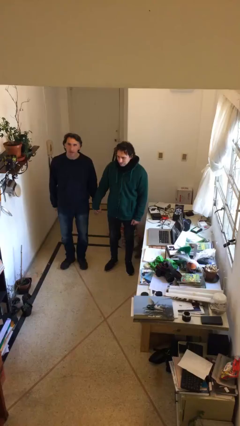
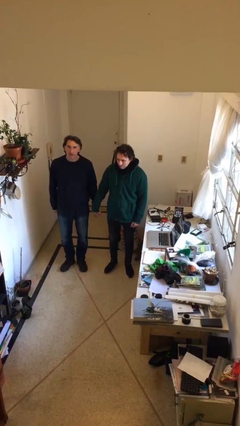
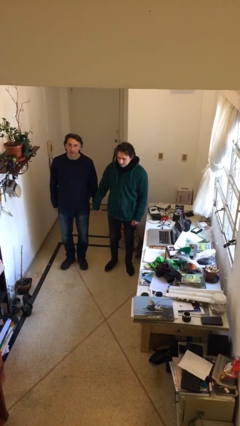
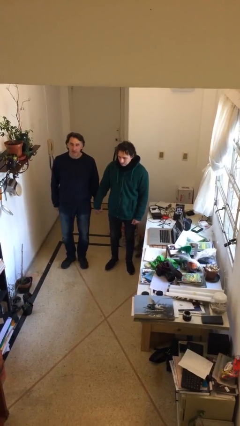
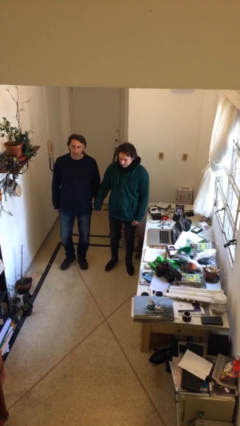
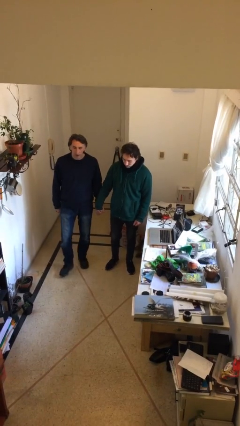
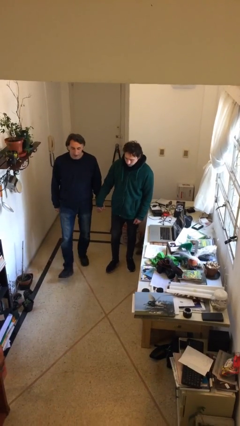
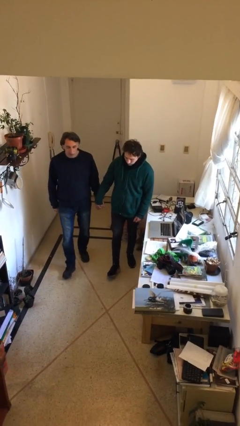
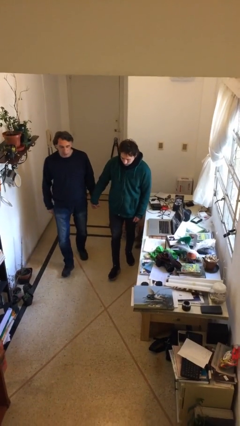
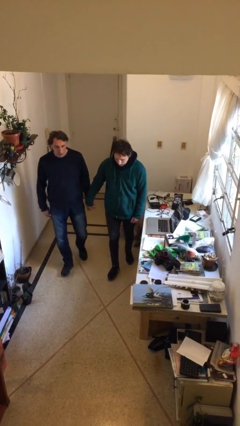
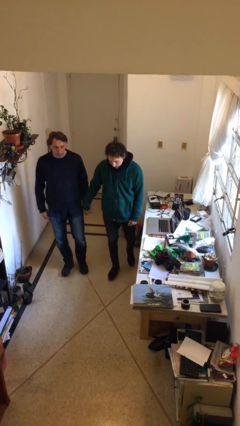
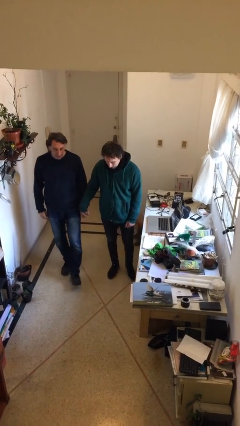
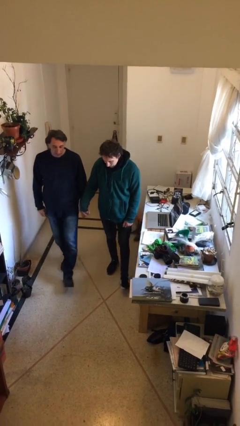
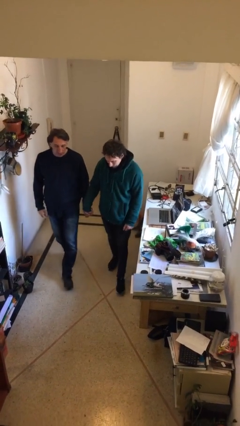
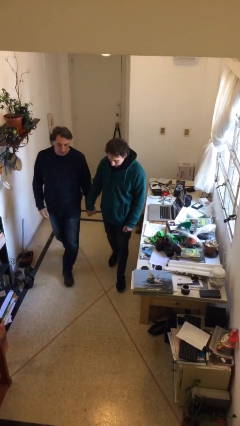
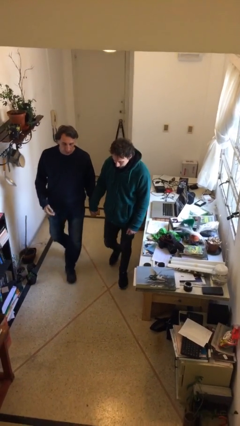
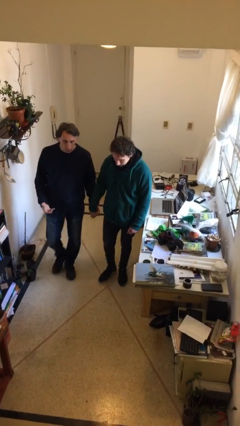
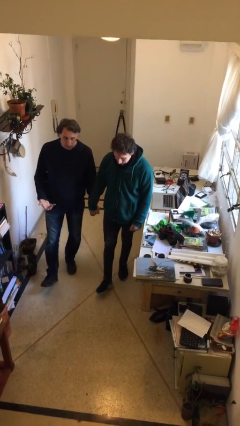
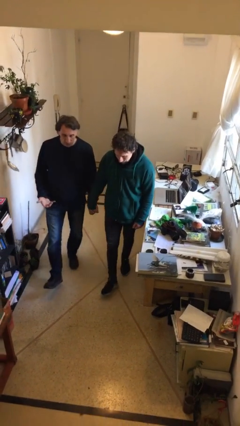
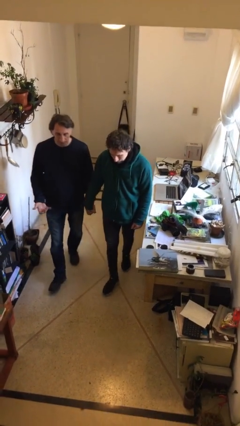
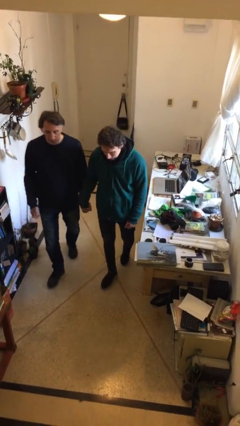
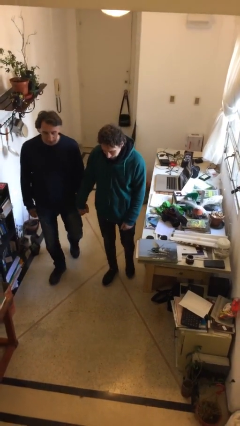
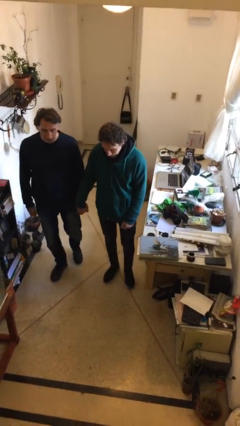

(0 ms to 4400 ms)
person holds hand

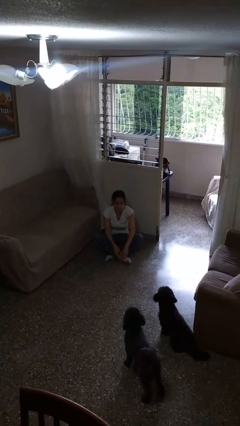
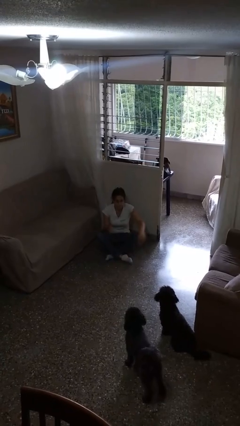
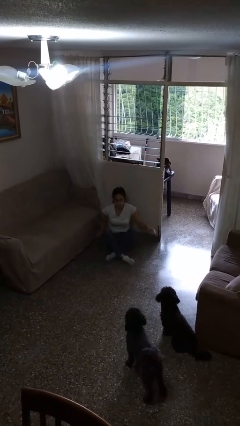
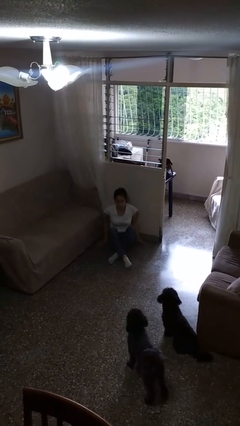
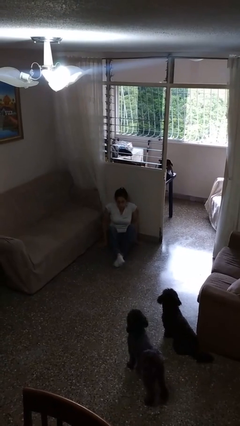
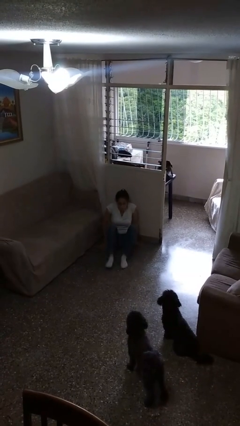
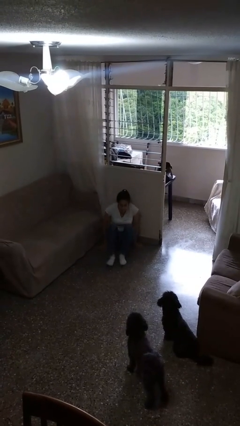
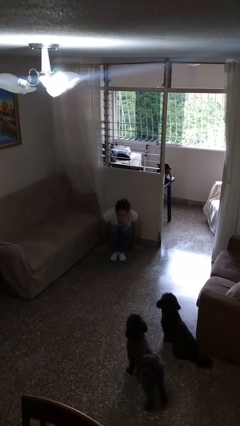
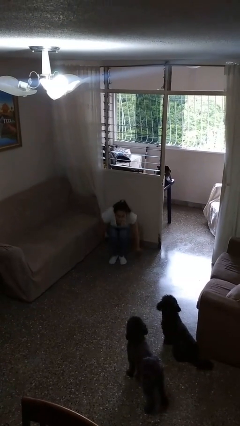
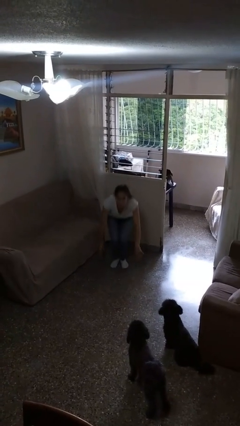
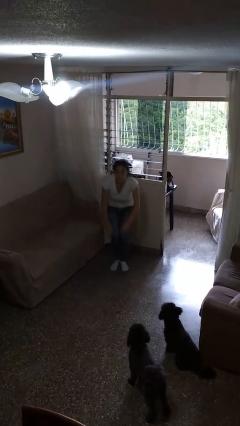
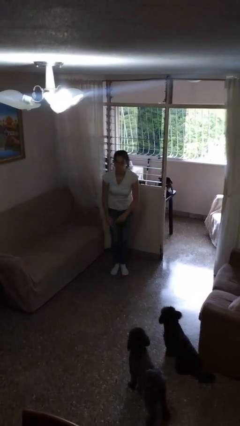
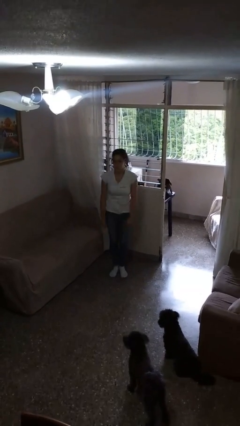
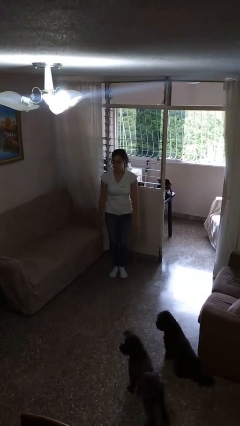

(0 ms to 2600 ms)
person stands up from floor

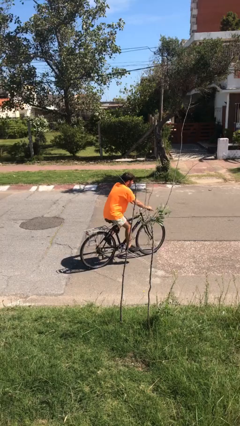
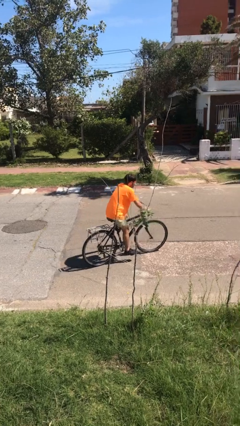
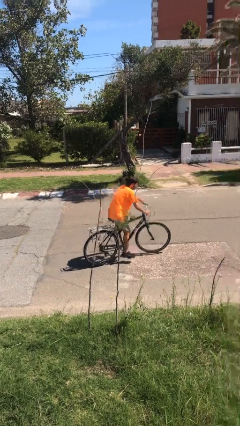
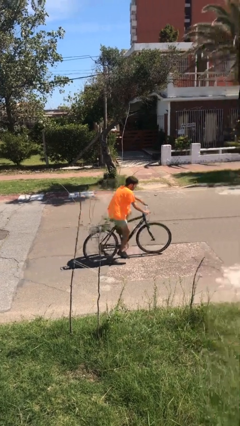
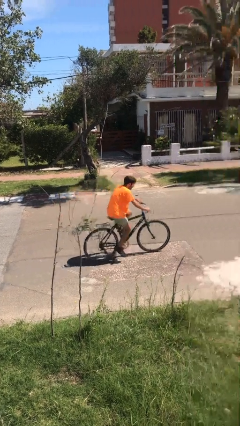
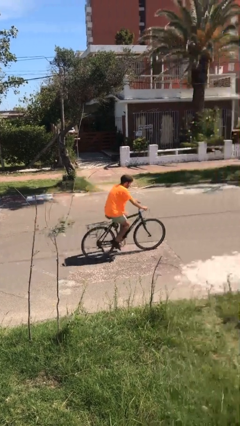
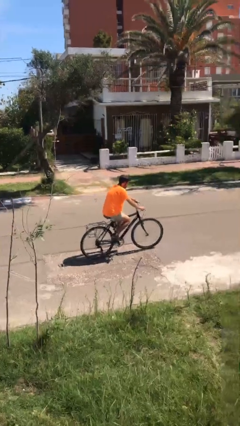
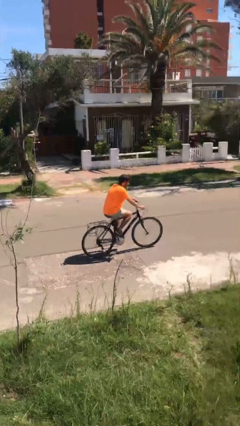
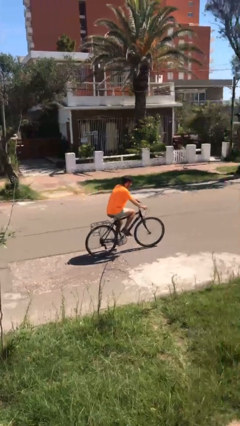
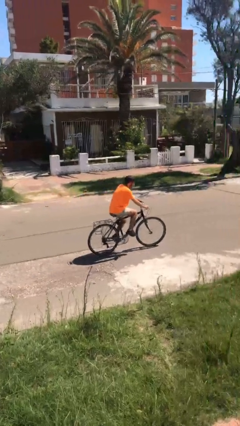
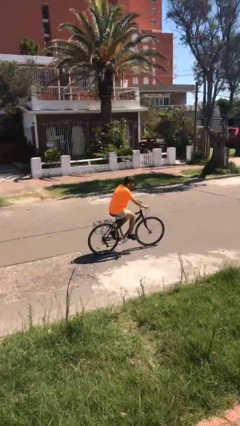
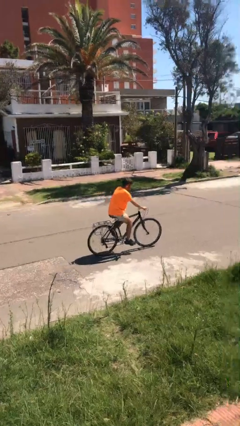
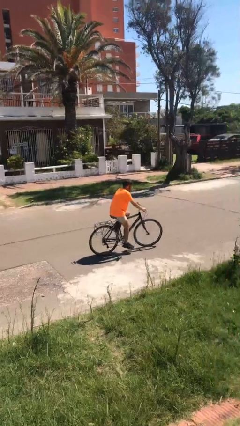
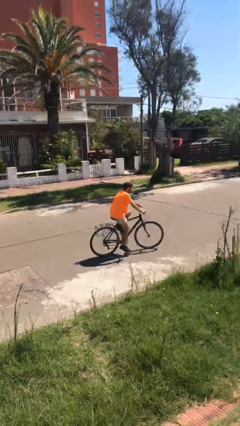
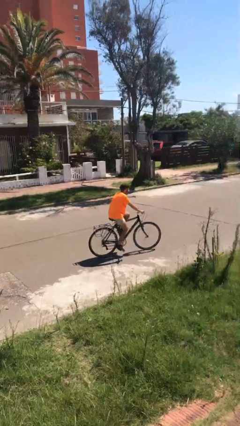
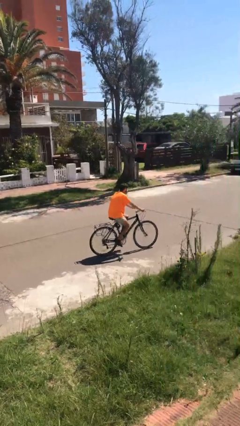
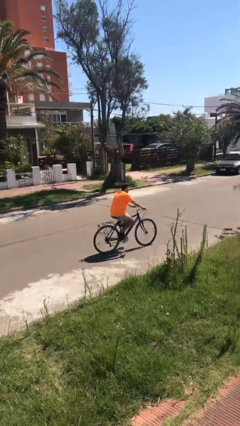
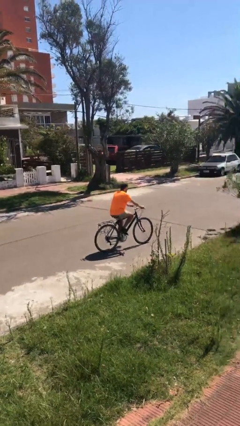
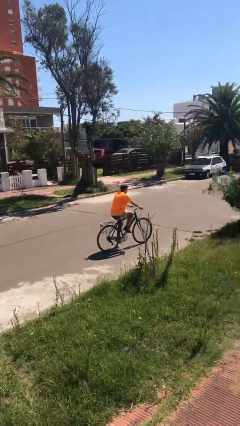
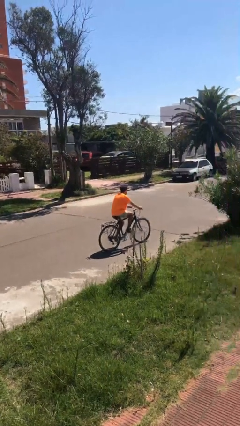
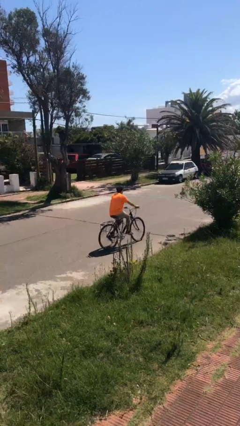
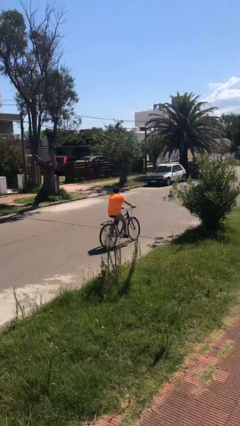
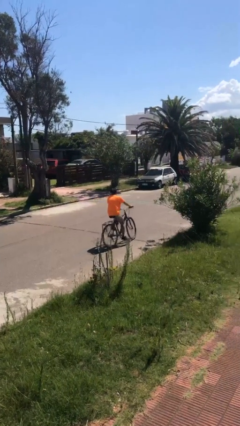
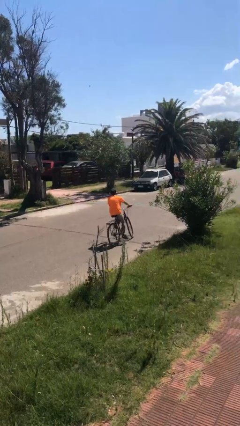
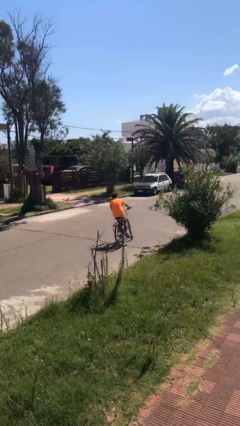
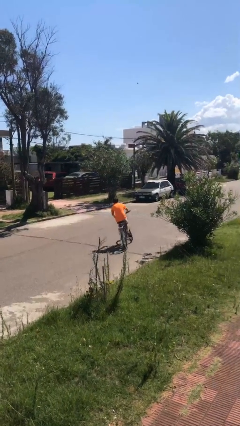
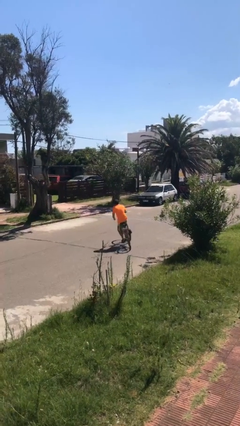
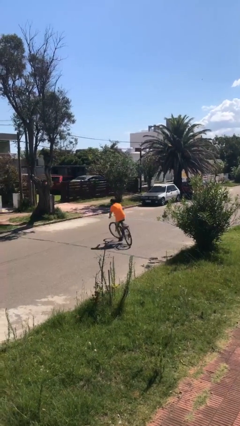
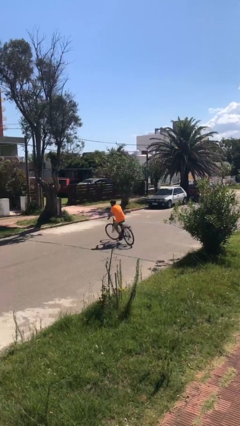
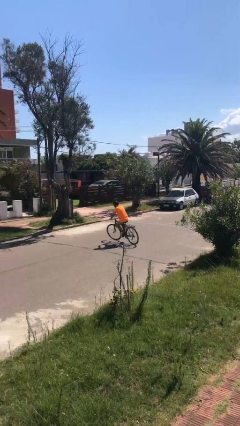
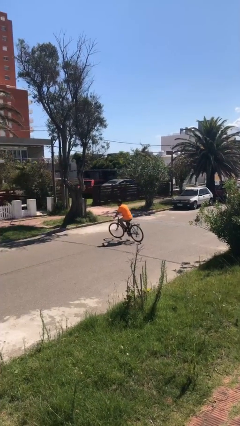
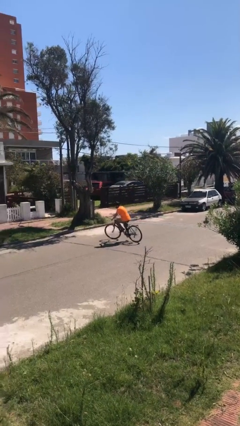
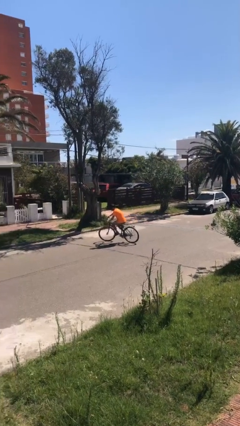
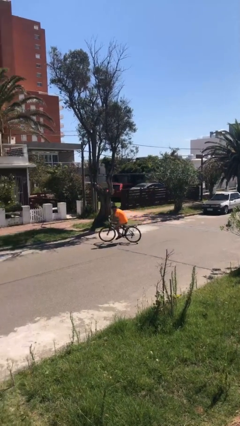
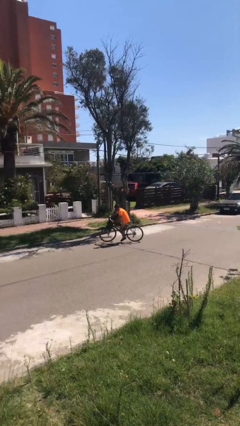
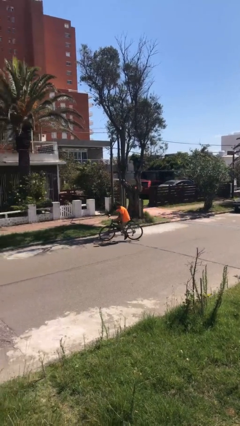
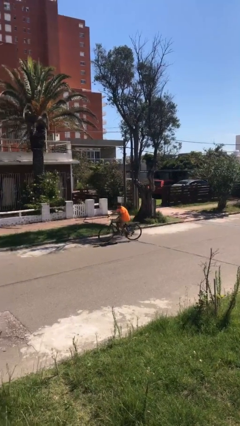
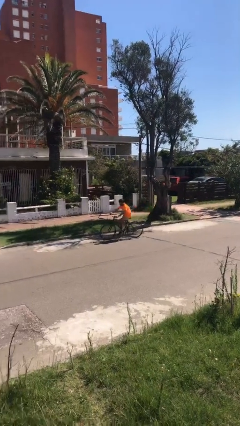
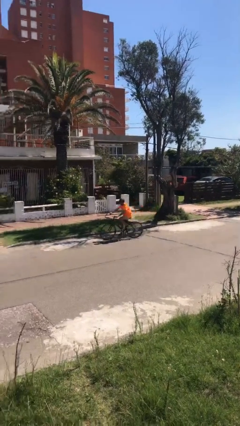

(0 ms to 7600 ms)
person rides bicycle

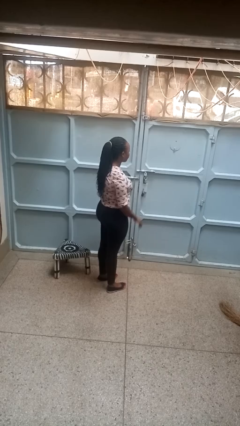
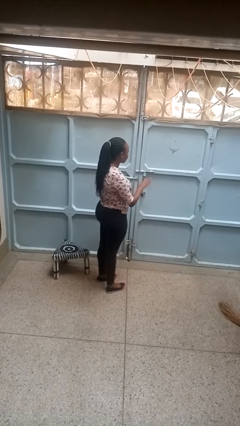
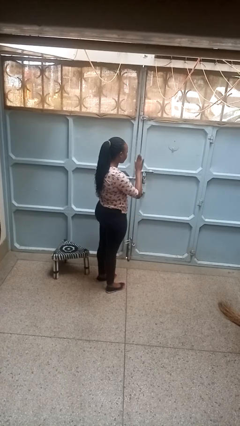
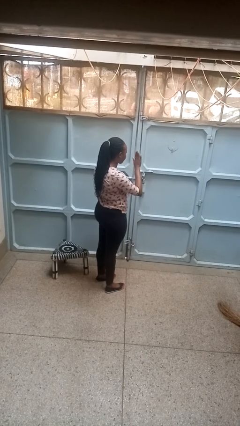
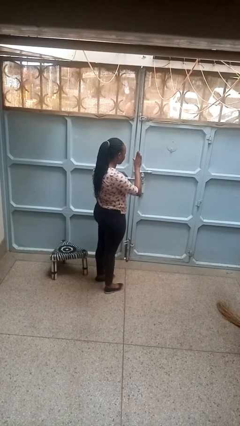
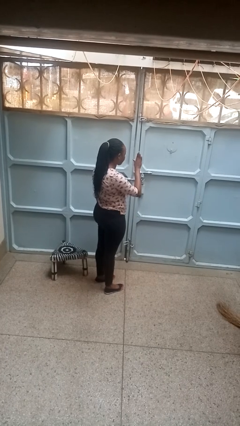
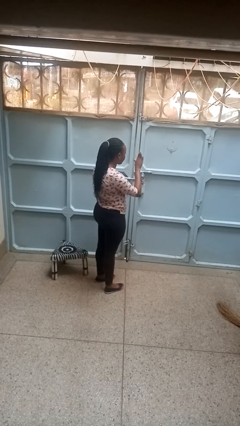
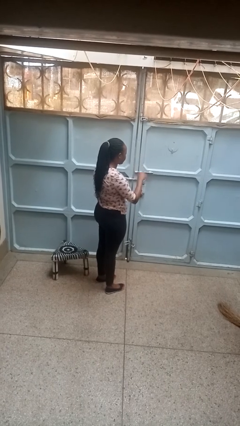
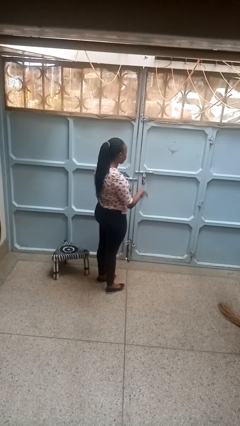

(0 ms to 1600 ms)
person gestures stop

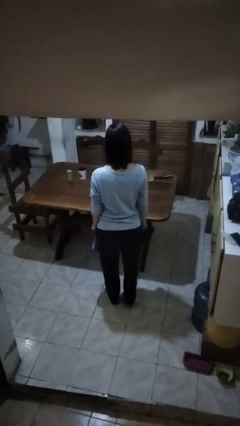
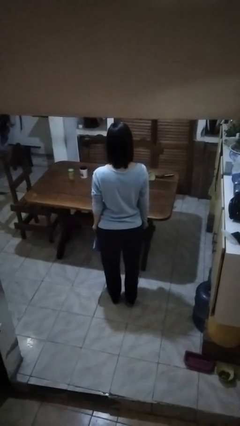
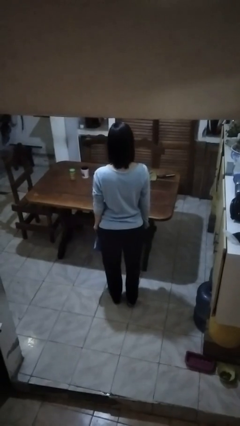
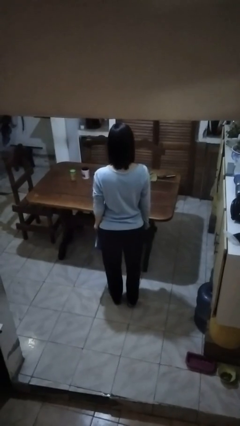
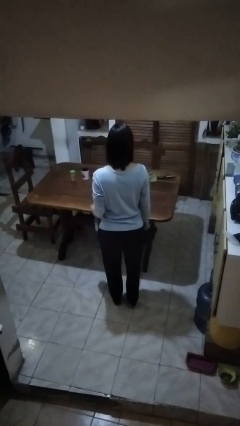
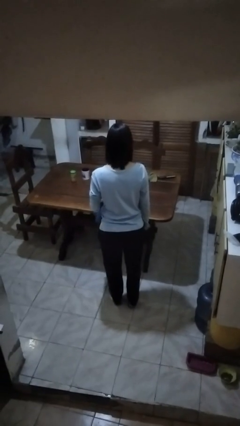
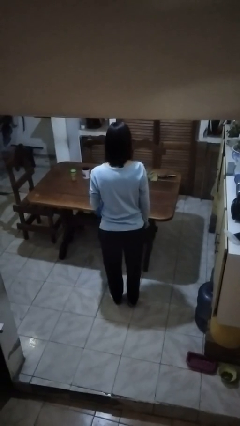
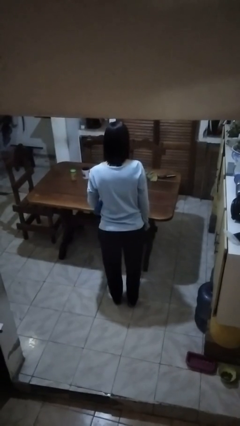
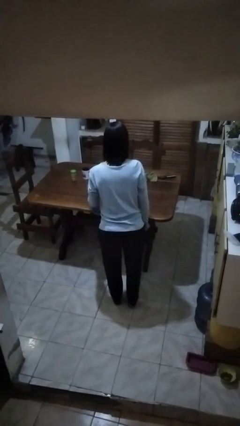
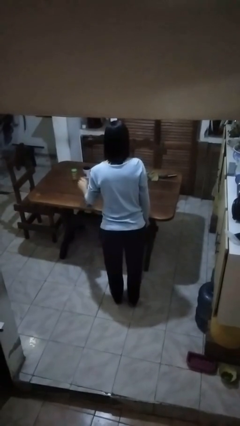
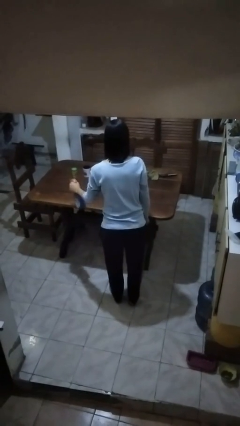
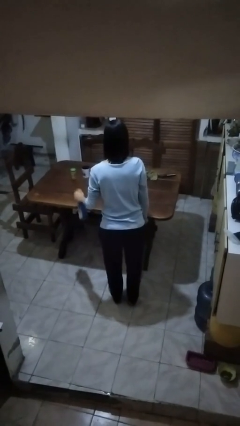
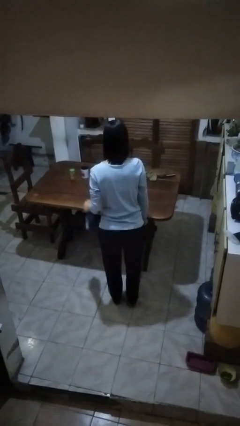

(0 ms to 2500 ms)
person sprays from bottle
